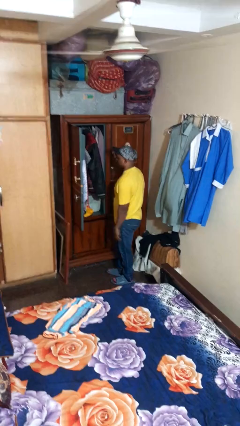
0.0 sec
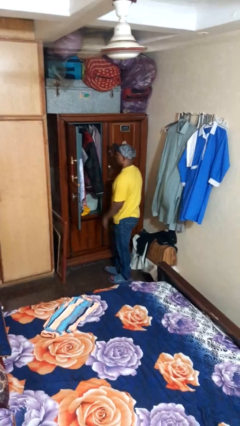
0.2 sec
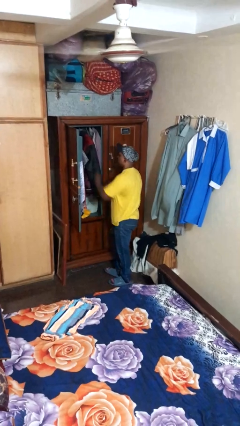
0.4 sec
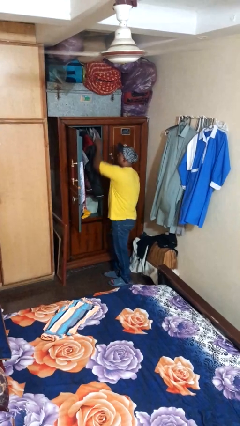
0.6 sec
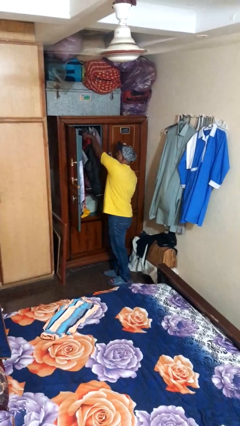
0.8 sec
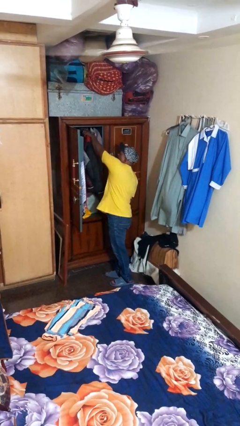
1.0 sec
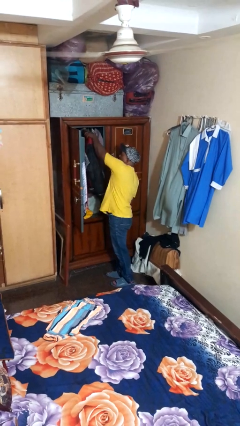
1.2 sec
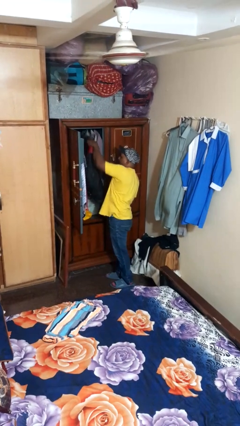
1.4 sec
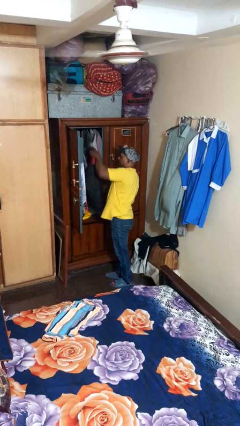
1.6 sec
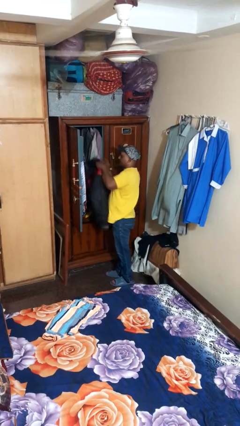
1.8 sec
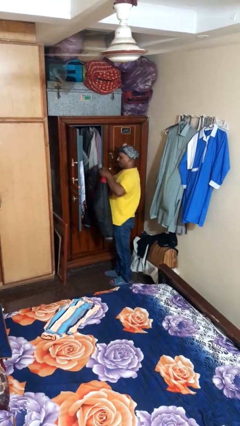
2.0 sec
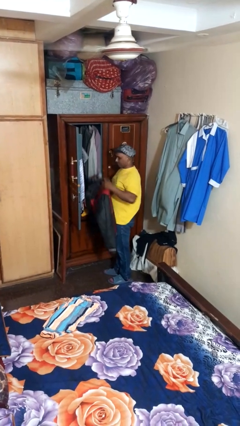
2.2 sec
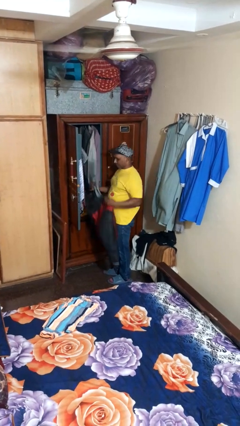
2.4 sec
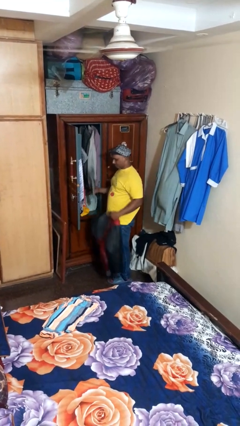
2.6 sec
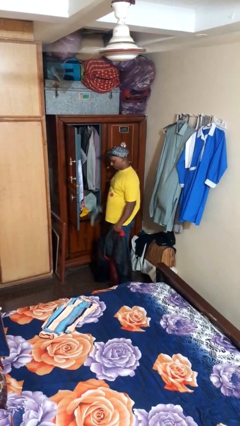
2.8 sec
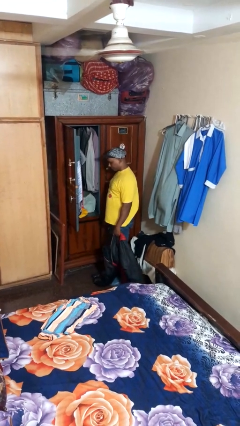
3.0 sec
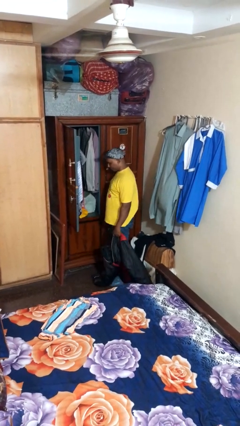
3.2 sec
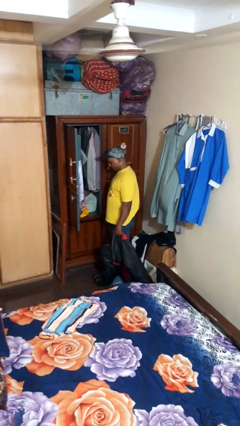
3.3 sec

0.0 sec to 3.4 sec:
person takes clothes from closet

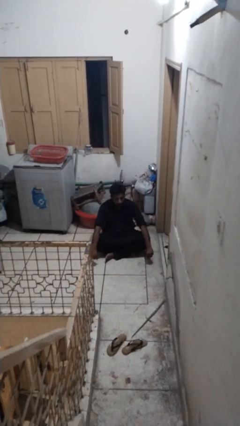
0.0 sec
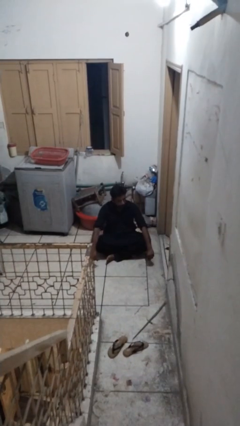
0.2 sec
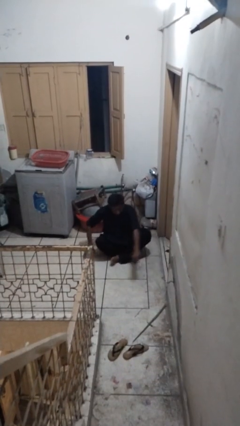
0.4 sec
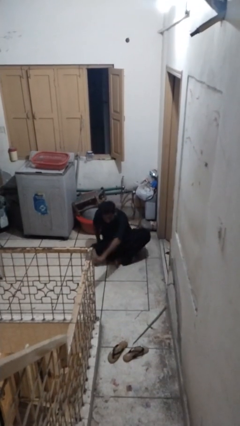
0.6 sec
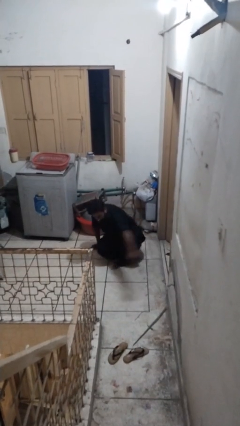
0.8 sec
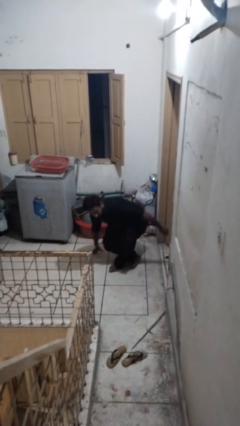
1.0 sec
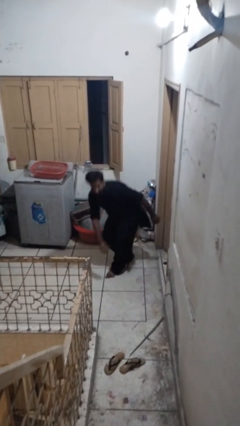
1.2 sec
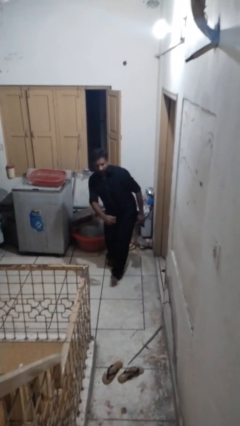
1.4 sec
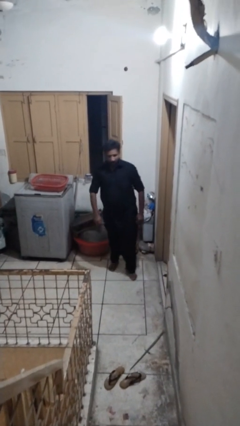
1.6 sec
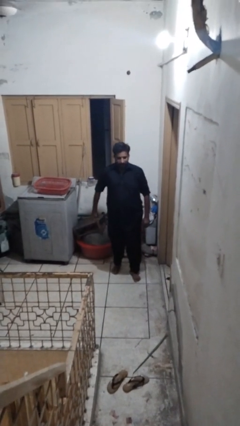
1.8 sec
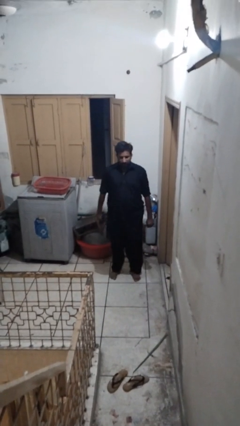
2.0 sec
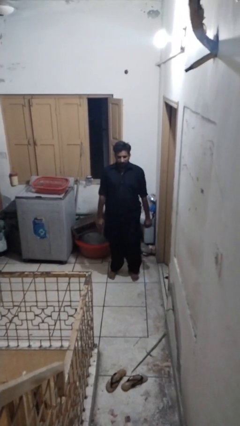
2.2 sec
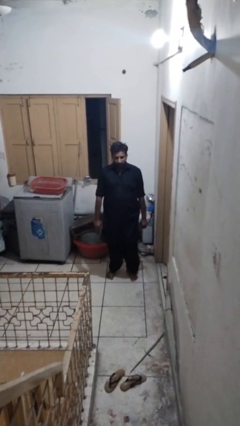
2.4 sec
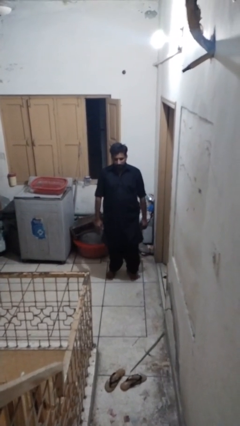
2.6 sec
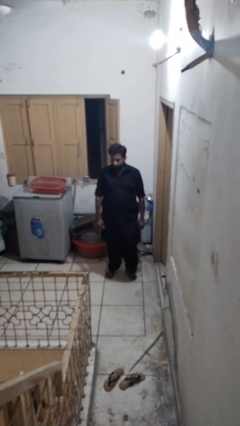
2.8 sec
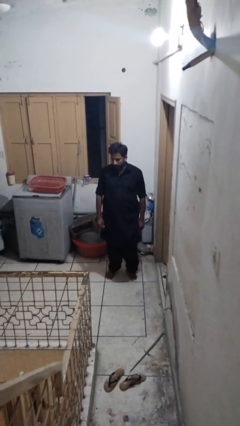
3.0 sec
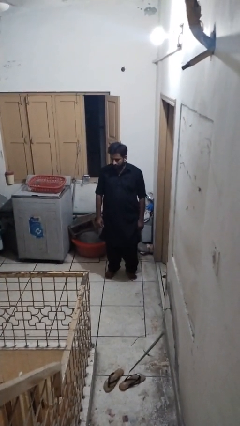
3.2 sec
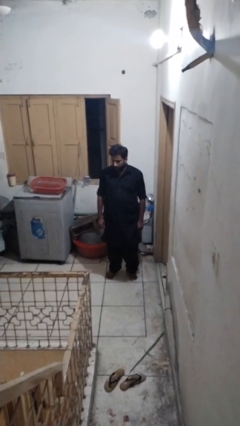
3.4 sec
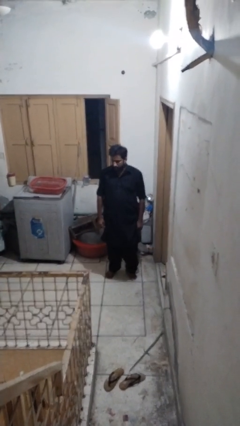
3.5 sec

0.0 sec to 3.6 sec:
person stands up from floor

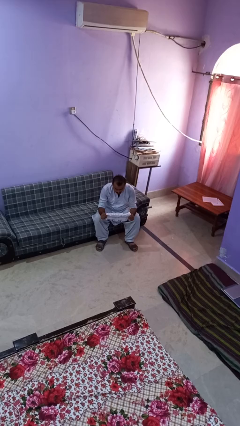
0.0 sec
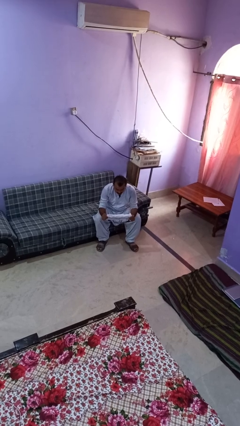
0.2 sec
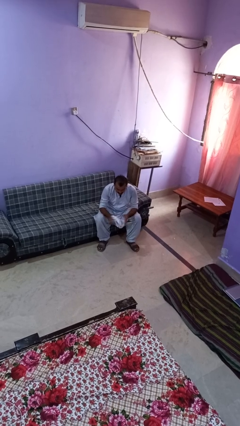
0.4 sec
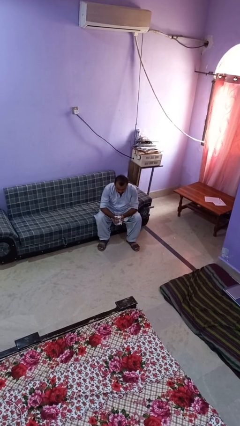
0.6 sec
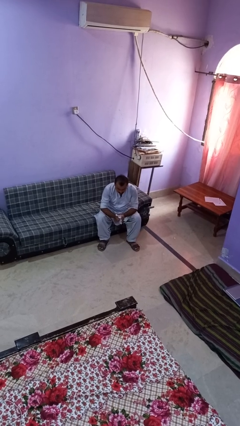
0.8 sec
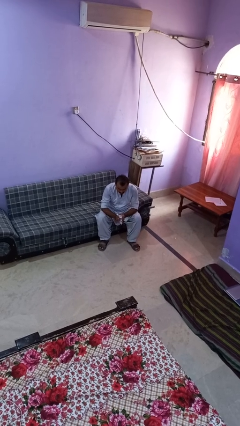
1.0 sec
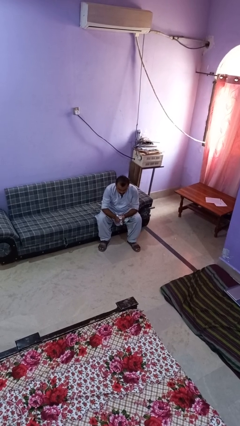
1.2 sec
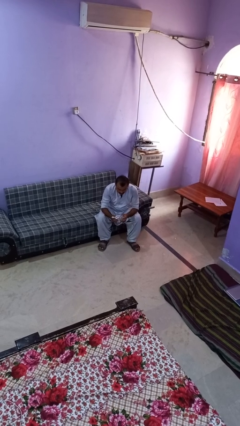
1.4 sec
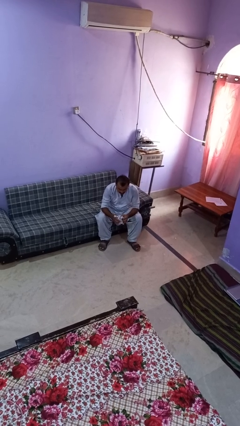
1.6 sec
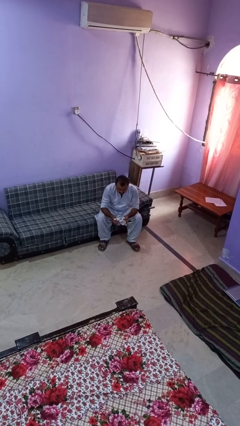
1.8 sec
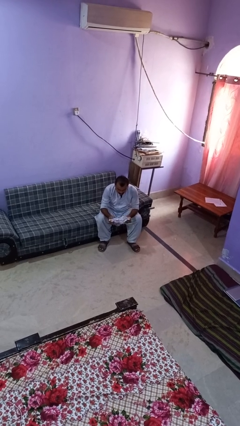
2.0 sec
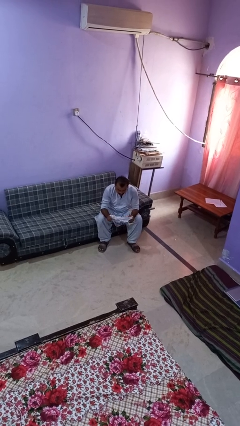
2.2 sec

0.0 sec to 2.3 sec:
person crumples paper

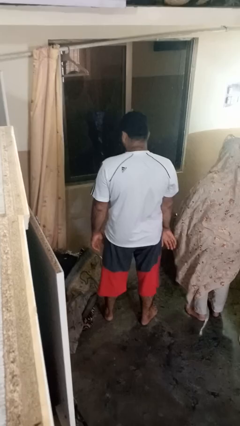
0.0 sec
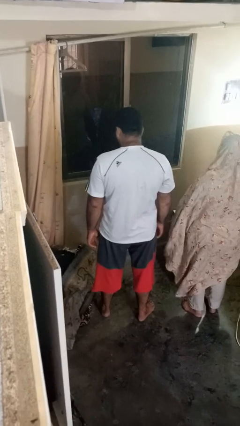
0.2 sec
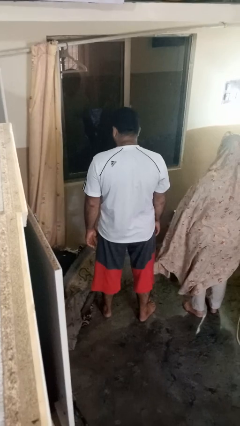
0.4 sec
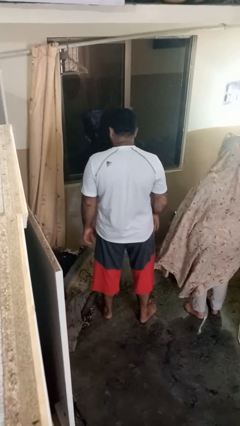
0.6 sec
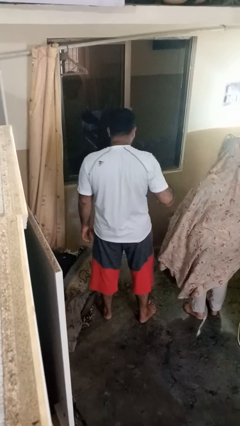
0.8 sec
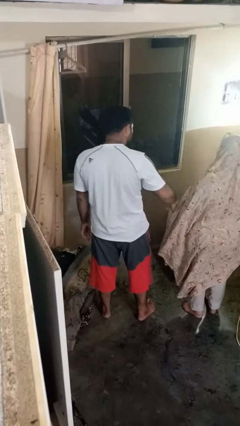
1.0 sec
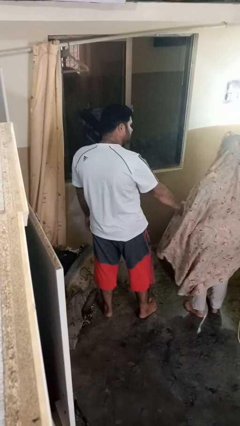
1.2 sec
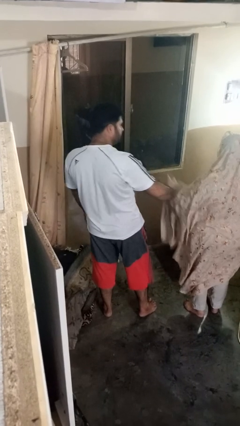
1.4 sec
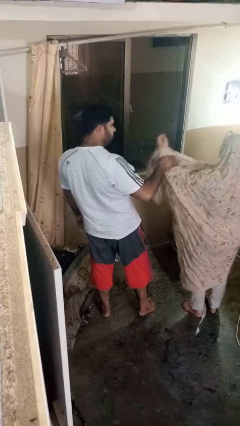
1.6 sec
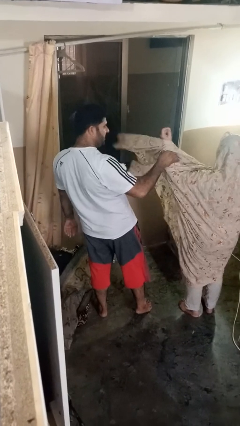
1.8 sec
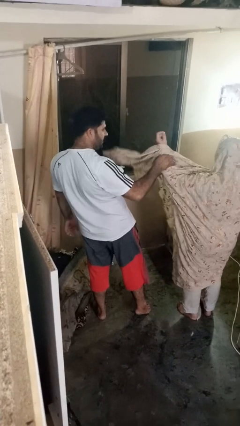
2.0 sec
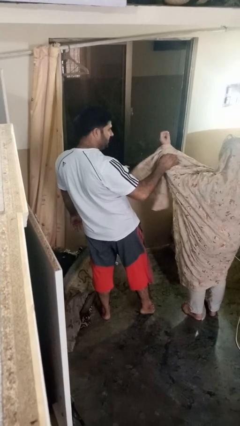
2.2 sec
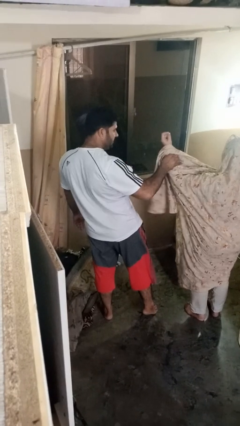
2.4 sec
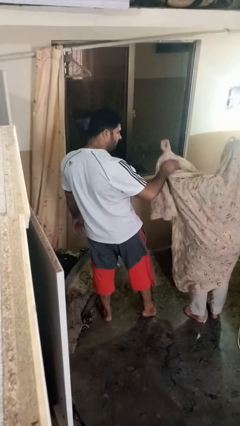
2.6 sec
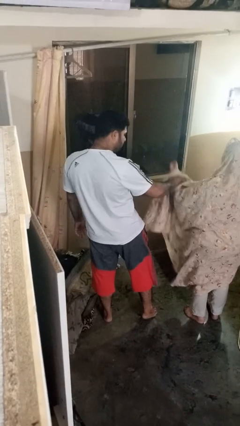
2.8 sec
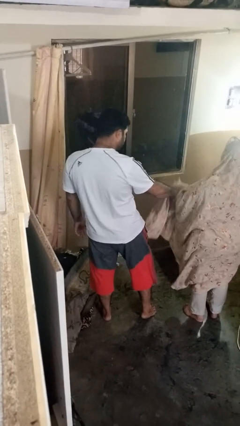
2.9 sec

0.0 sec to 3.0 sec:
person grabs person by forearm

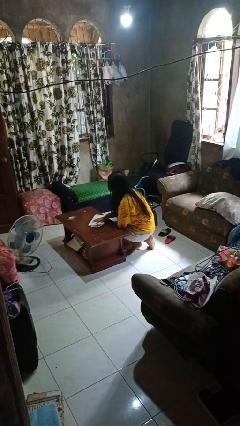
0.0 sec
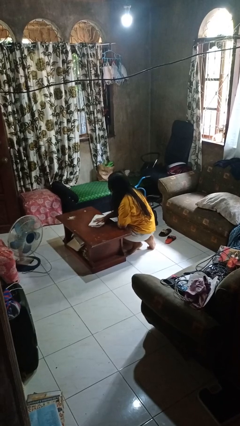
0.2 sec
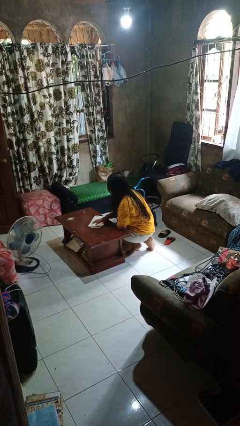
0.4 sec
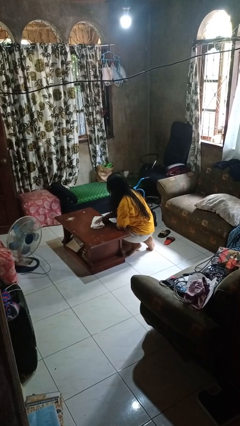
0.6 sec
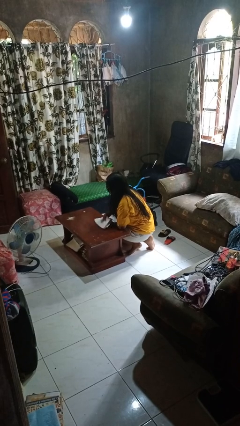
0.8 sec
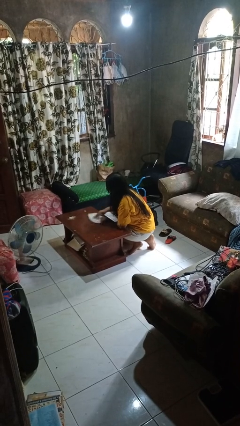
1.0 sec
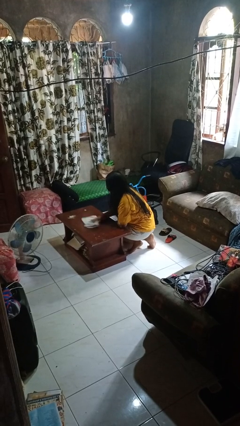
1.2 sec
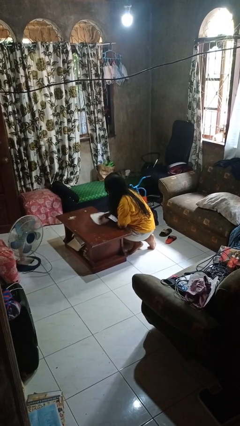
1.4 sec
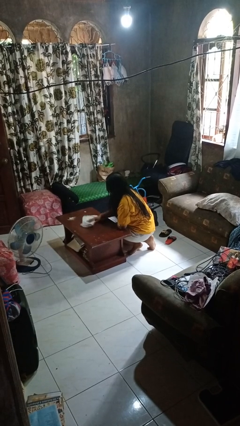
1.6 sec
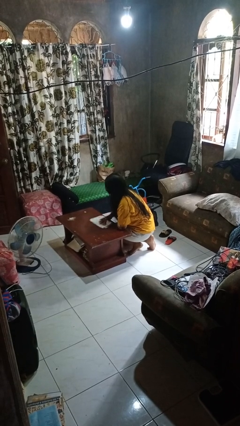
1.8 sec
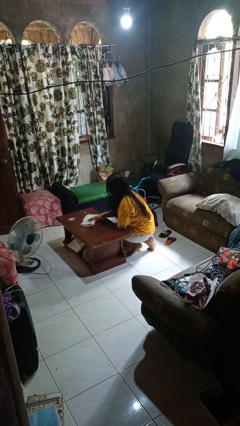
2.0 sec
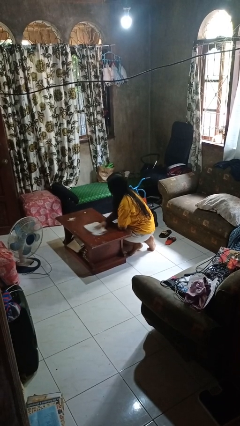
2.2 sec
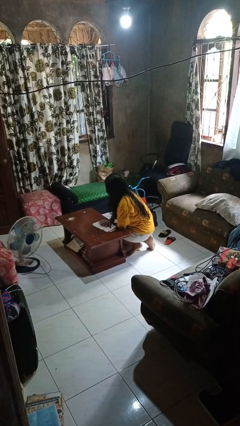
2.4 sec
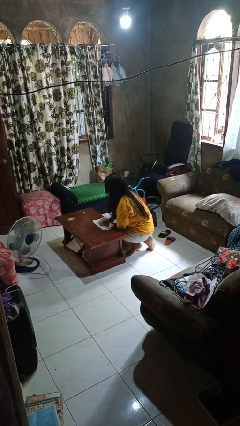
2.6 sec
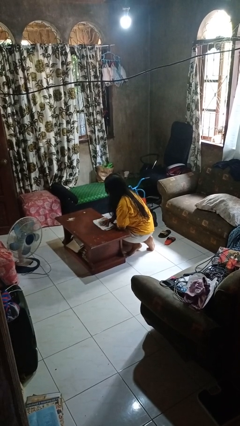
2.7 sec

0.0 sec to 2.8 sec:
person cleans table with rag

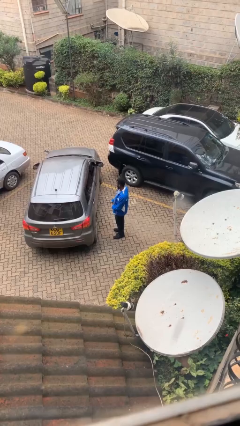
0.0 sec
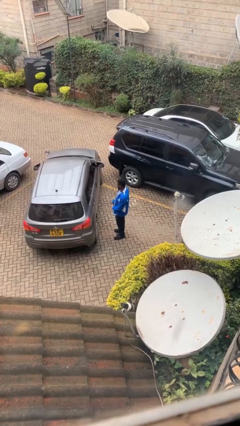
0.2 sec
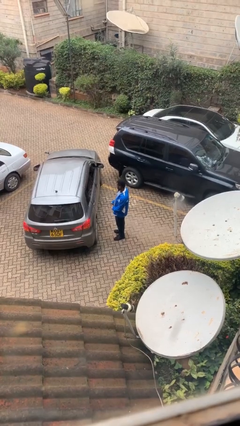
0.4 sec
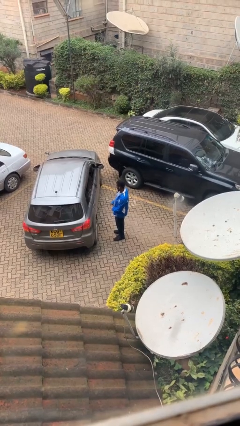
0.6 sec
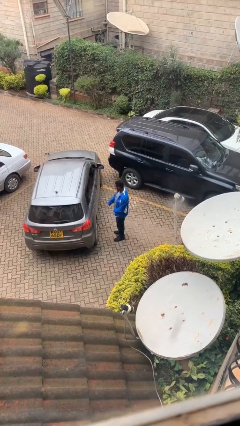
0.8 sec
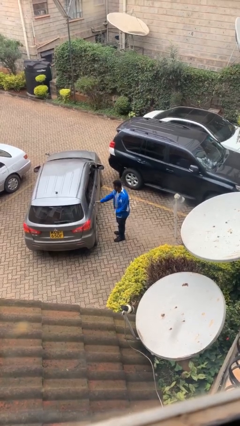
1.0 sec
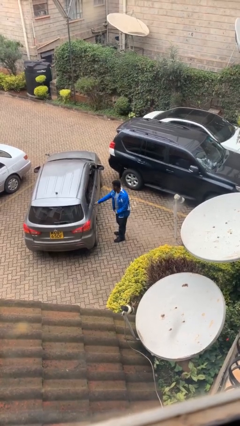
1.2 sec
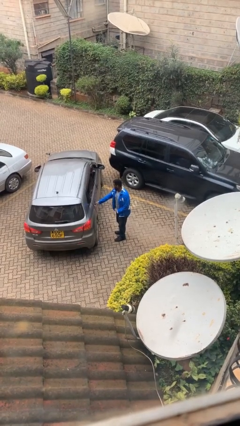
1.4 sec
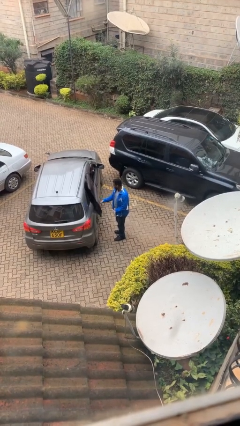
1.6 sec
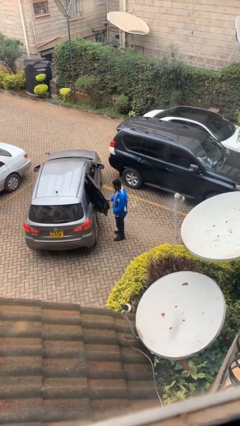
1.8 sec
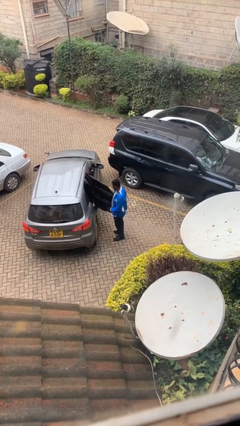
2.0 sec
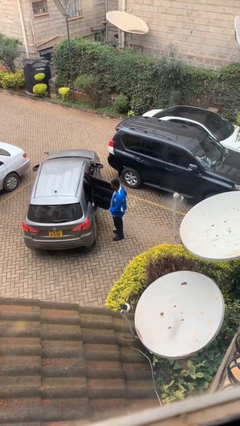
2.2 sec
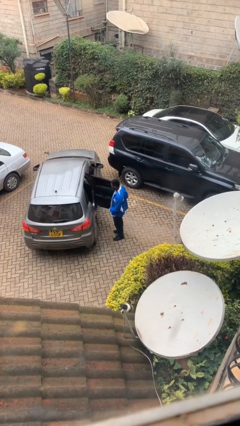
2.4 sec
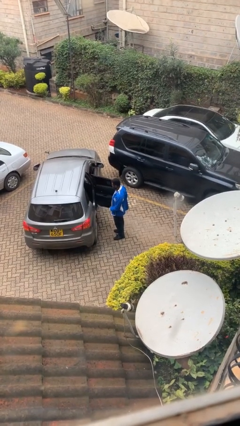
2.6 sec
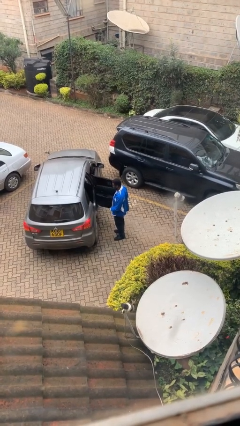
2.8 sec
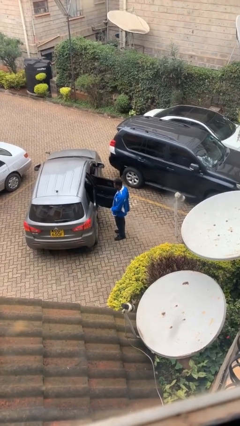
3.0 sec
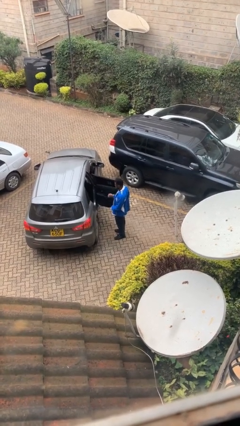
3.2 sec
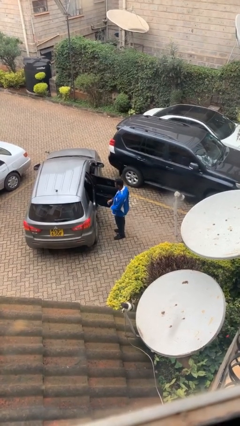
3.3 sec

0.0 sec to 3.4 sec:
person opens car door
